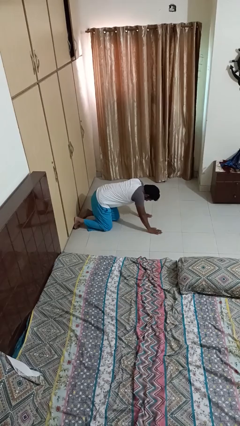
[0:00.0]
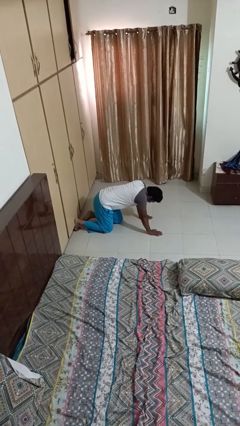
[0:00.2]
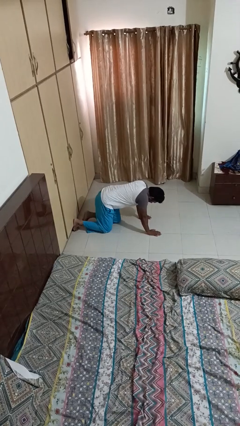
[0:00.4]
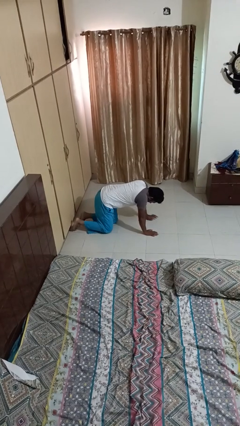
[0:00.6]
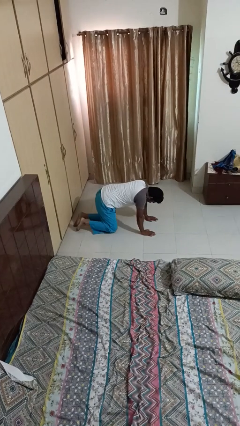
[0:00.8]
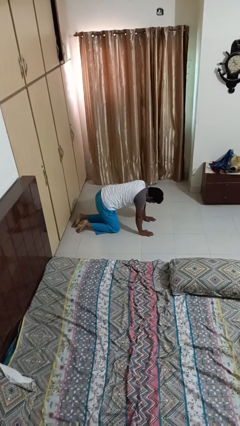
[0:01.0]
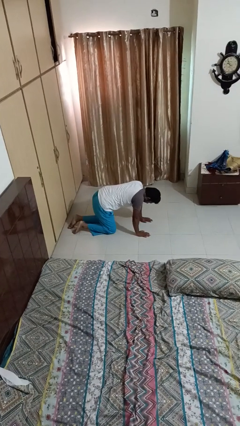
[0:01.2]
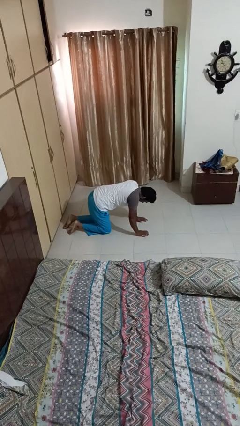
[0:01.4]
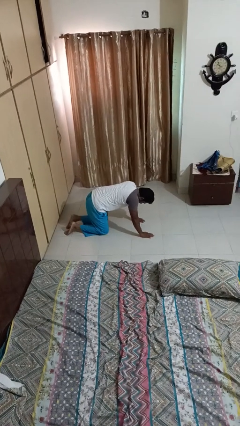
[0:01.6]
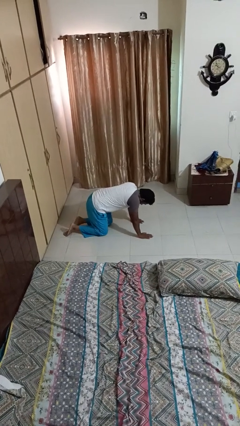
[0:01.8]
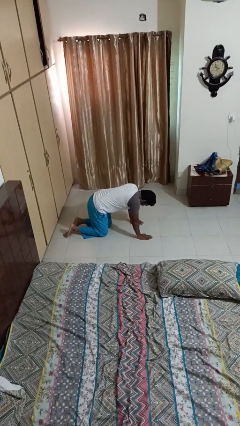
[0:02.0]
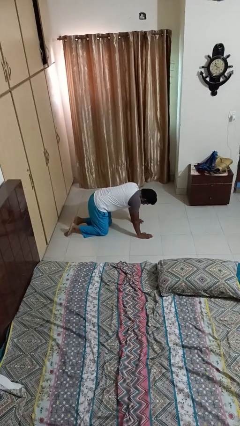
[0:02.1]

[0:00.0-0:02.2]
person crawls

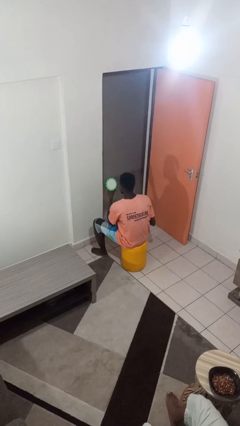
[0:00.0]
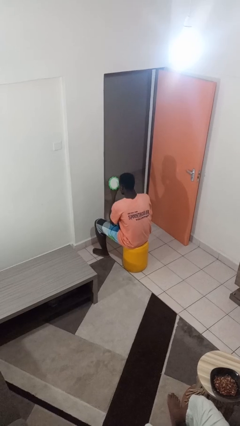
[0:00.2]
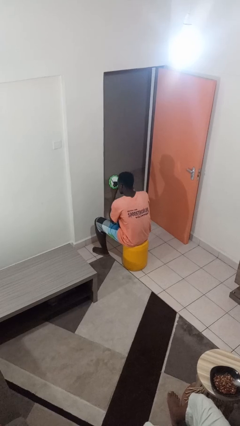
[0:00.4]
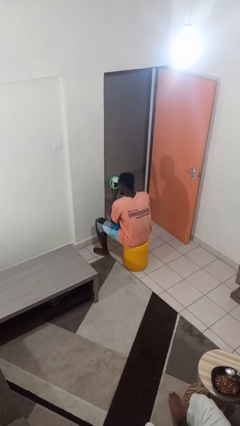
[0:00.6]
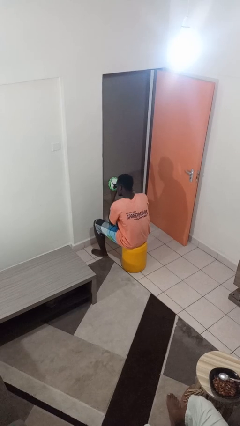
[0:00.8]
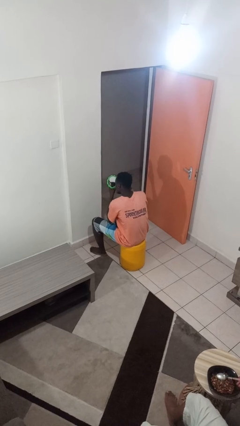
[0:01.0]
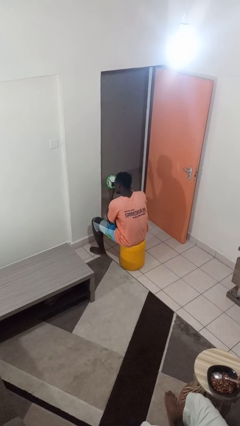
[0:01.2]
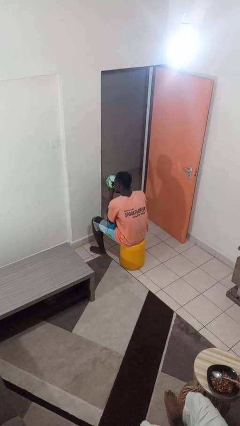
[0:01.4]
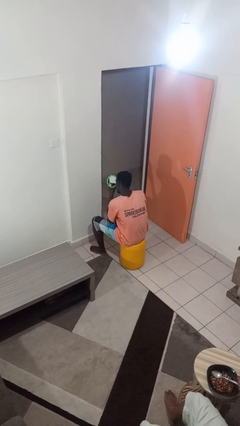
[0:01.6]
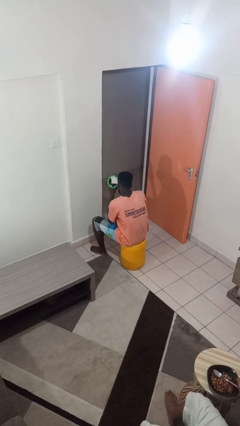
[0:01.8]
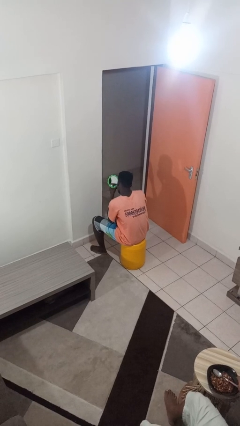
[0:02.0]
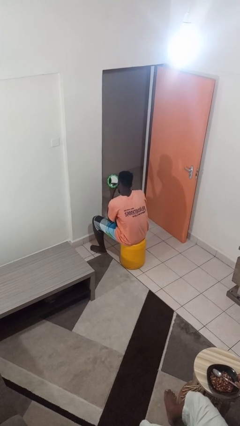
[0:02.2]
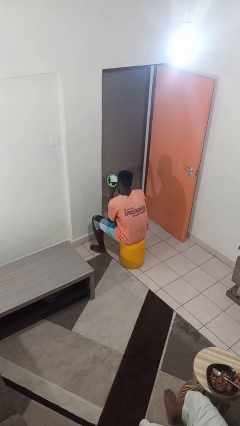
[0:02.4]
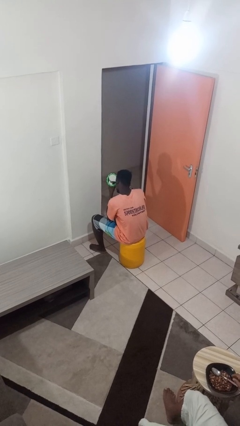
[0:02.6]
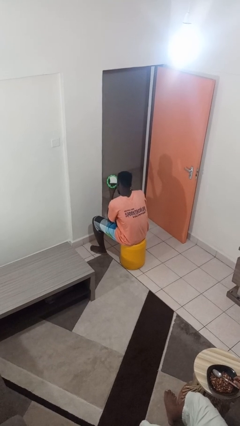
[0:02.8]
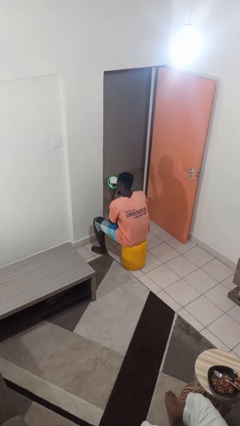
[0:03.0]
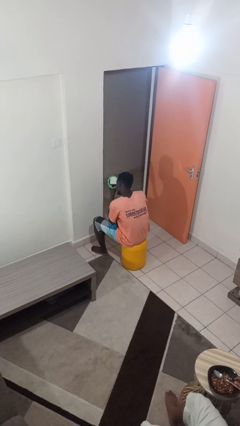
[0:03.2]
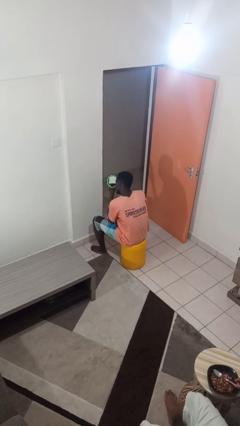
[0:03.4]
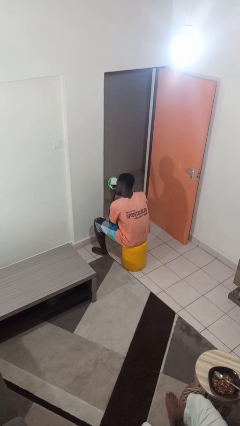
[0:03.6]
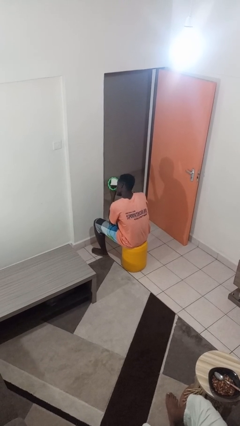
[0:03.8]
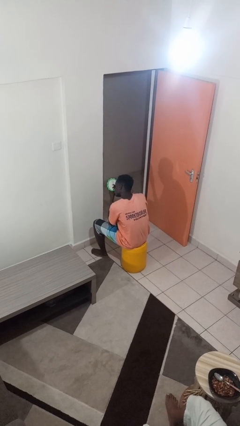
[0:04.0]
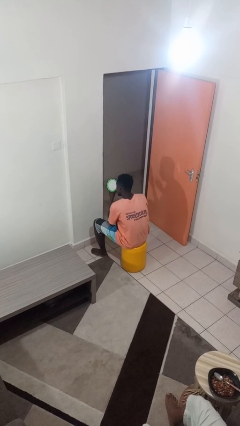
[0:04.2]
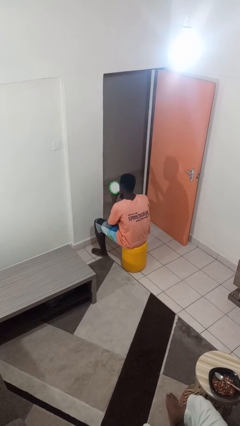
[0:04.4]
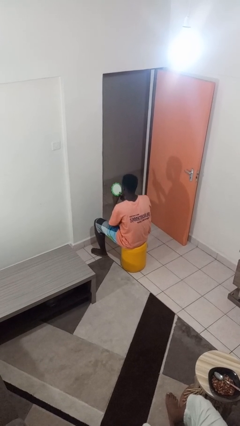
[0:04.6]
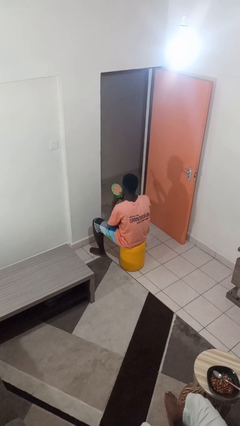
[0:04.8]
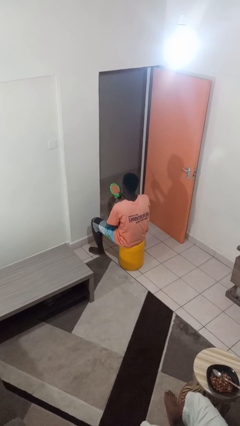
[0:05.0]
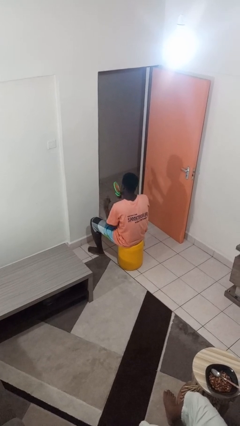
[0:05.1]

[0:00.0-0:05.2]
person applies eye makeup

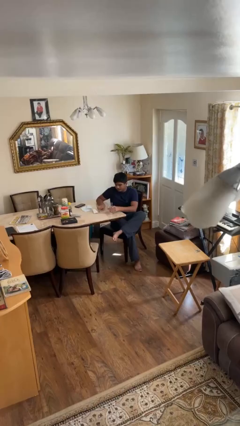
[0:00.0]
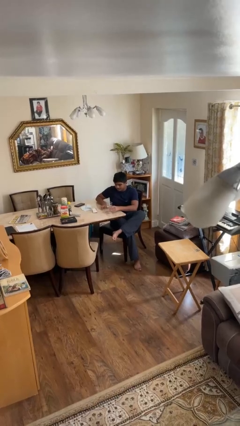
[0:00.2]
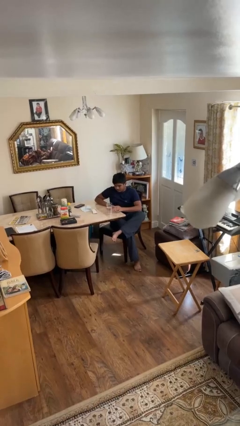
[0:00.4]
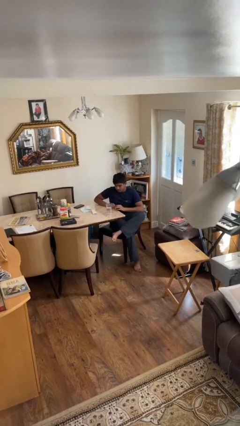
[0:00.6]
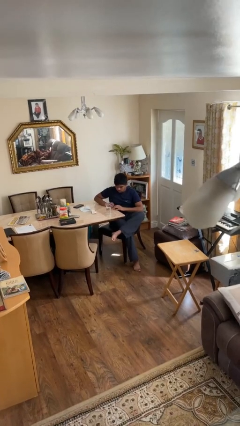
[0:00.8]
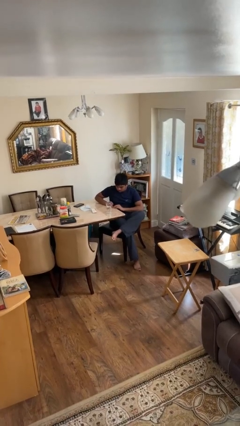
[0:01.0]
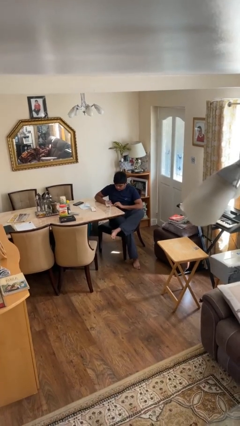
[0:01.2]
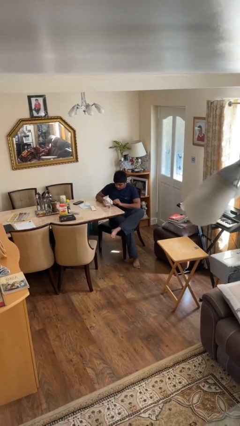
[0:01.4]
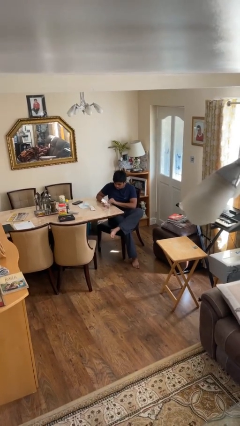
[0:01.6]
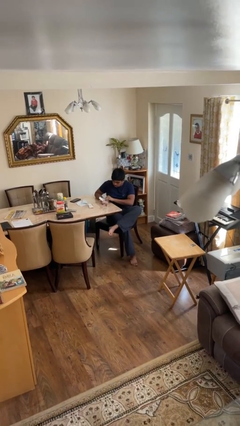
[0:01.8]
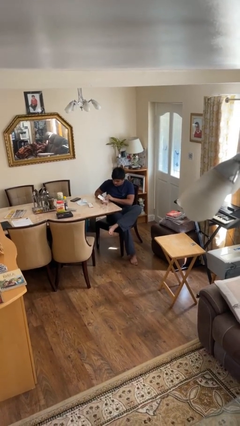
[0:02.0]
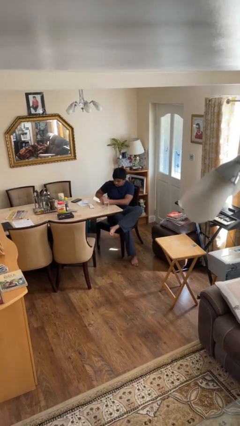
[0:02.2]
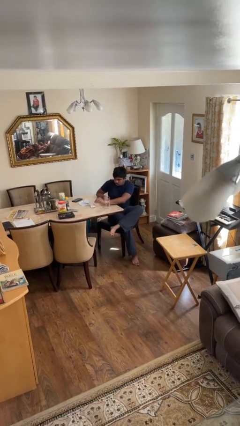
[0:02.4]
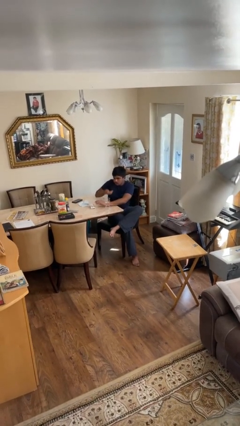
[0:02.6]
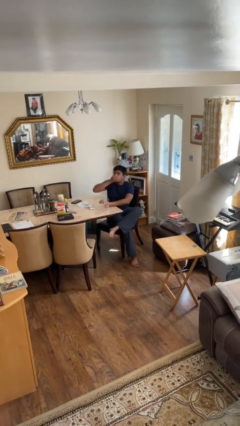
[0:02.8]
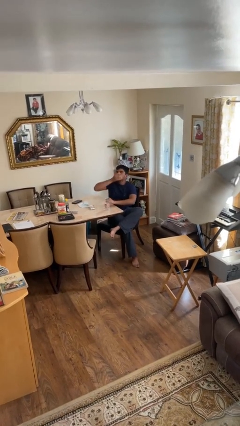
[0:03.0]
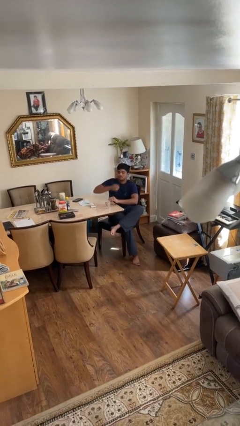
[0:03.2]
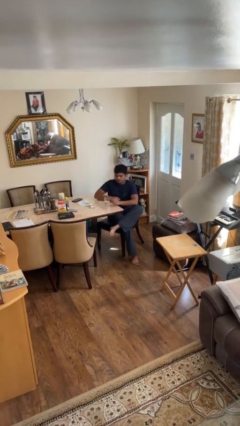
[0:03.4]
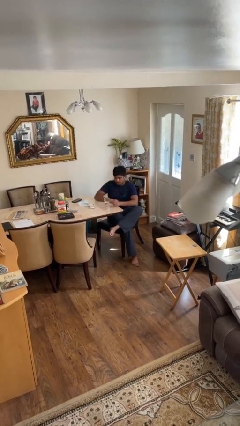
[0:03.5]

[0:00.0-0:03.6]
person takes medicine pills

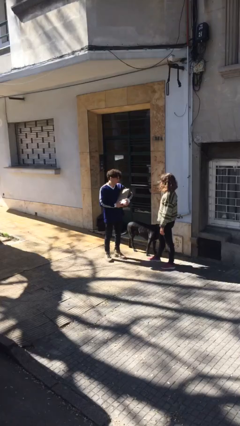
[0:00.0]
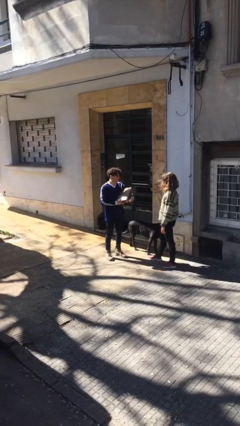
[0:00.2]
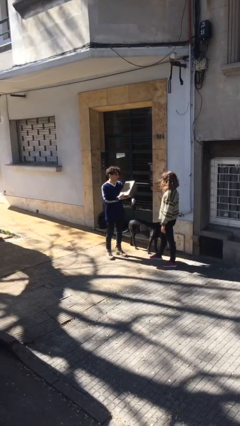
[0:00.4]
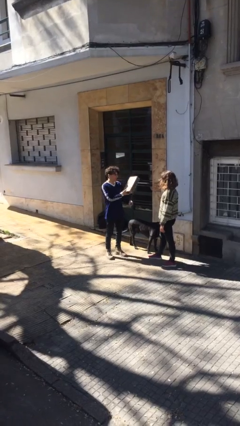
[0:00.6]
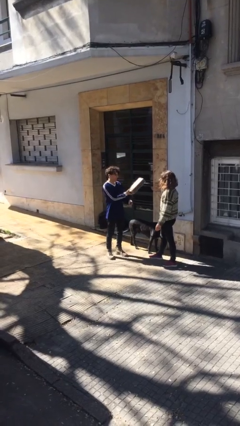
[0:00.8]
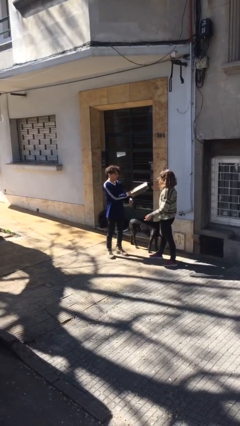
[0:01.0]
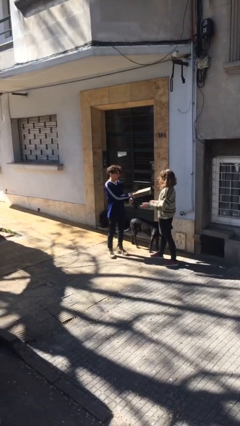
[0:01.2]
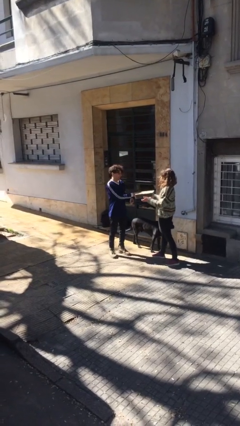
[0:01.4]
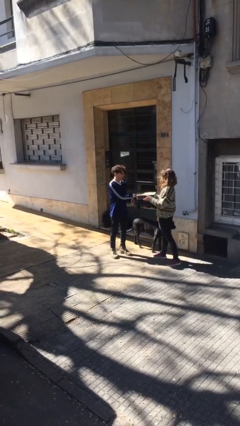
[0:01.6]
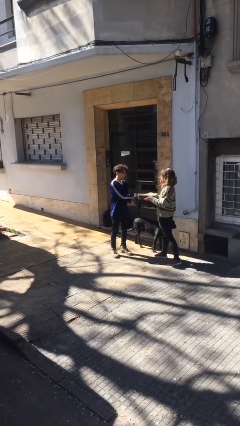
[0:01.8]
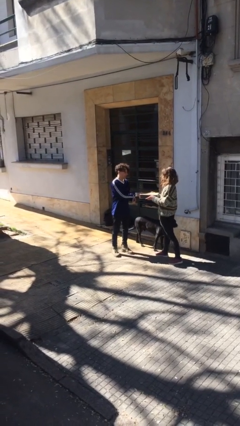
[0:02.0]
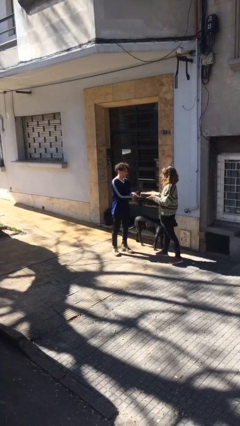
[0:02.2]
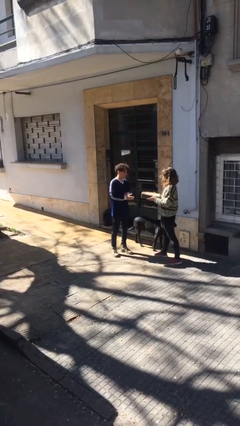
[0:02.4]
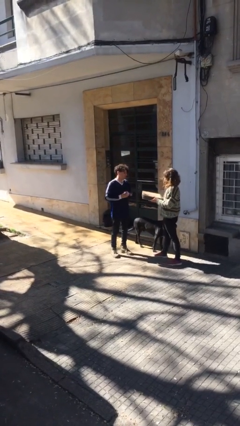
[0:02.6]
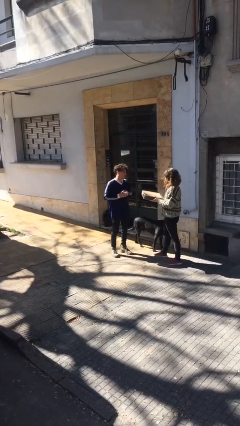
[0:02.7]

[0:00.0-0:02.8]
person transfers object to person

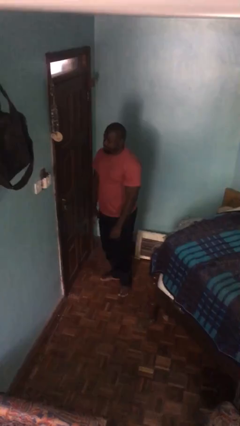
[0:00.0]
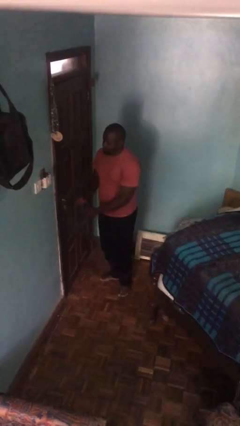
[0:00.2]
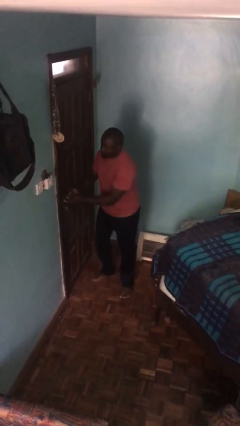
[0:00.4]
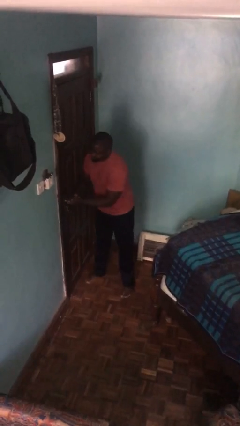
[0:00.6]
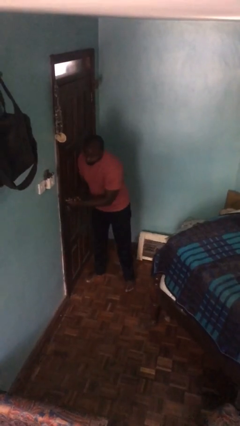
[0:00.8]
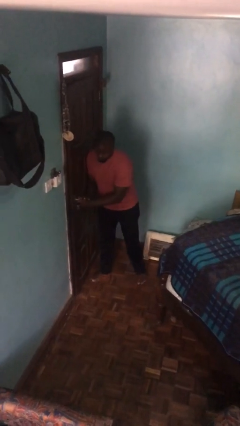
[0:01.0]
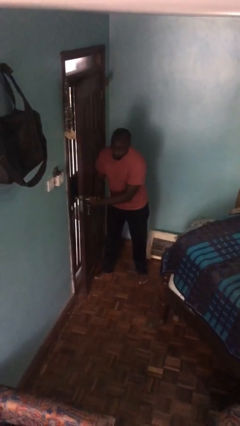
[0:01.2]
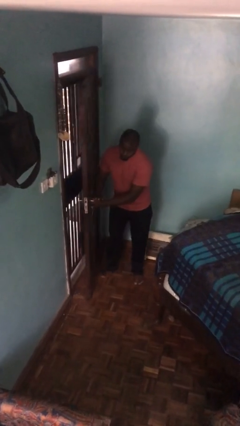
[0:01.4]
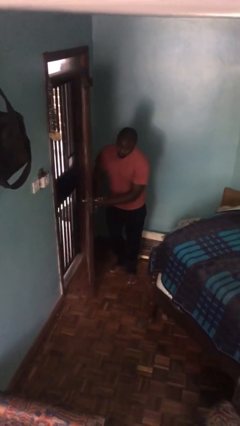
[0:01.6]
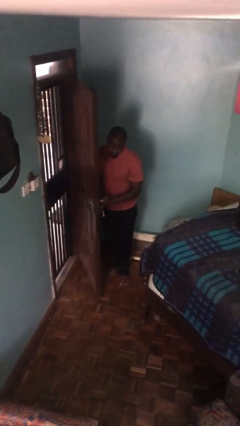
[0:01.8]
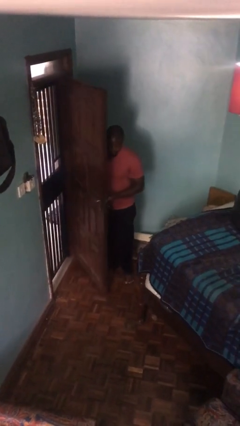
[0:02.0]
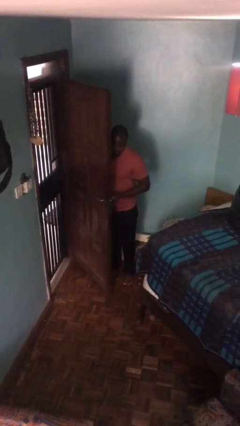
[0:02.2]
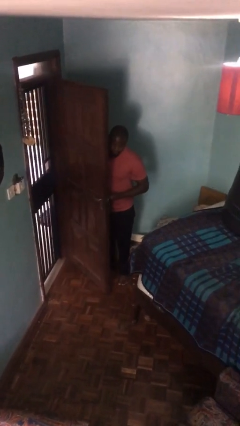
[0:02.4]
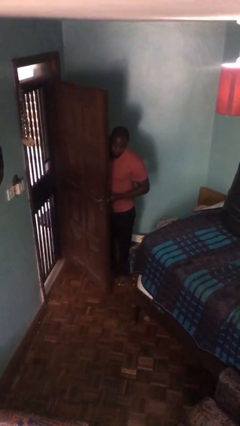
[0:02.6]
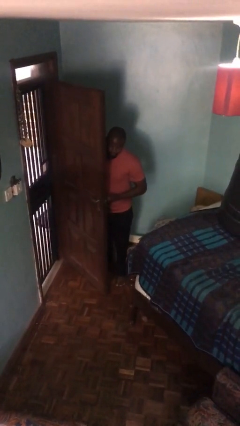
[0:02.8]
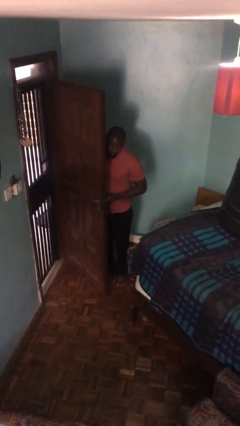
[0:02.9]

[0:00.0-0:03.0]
person opens facility door

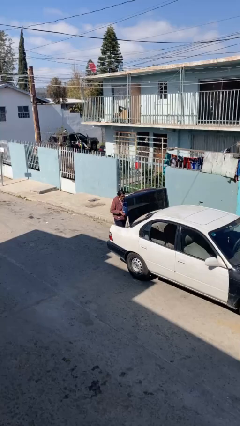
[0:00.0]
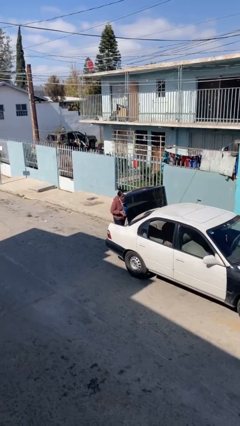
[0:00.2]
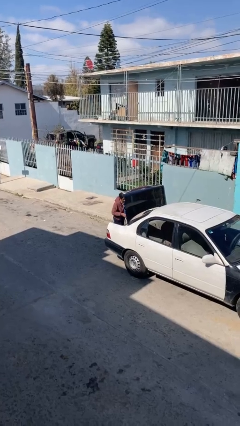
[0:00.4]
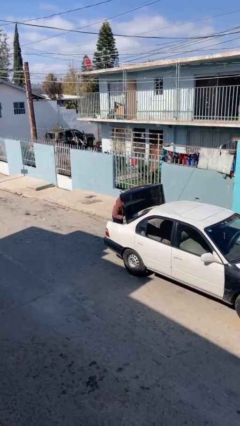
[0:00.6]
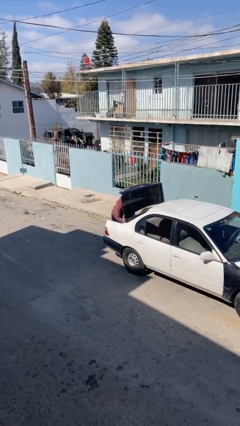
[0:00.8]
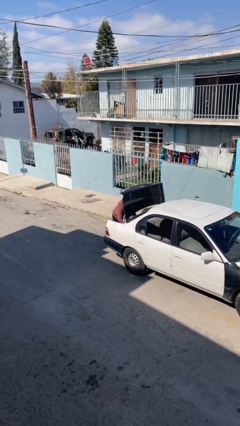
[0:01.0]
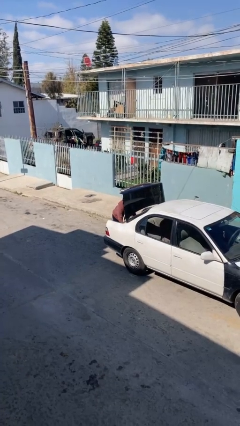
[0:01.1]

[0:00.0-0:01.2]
person loads car
